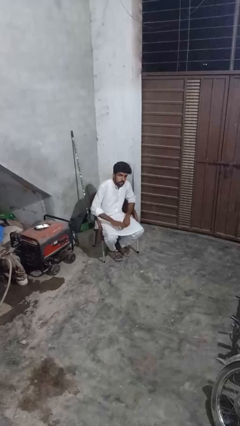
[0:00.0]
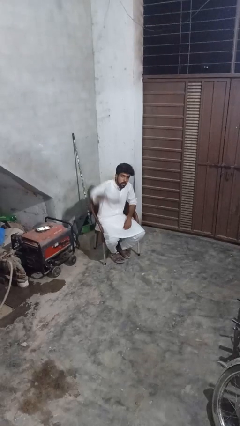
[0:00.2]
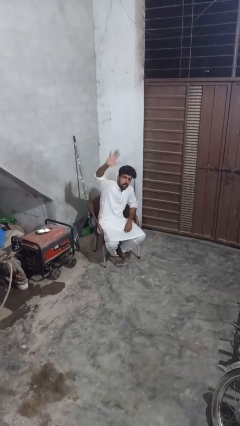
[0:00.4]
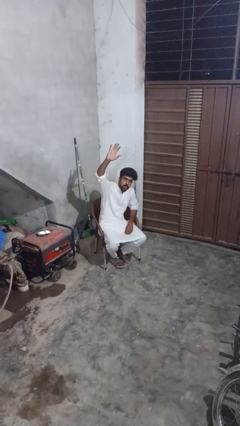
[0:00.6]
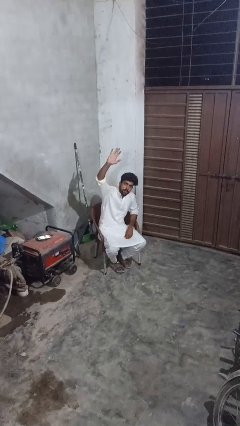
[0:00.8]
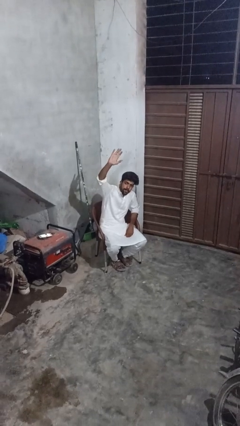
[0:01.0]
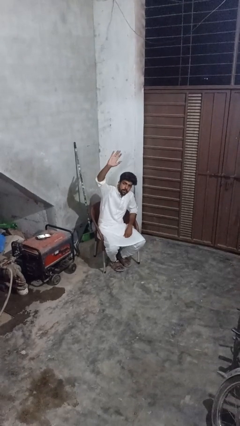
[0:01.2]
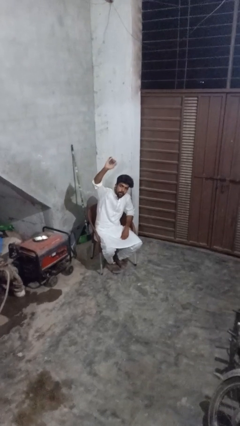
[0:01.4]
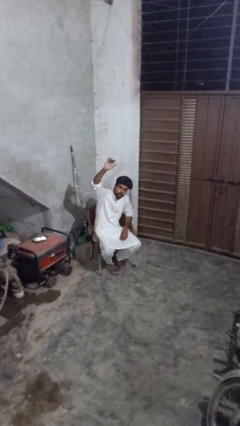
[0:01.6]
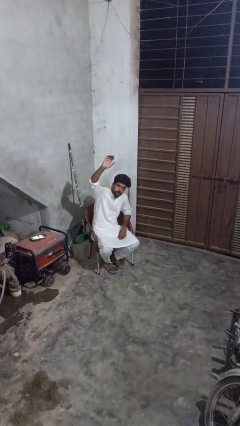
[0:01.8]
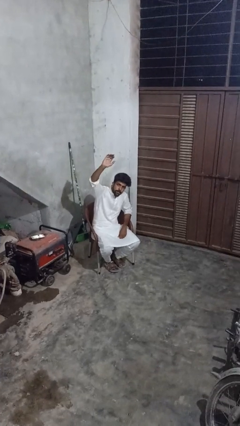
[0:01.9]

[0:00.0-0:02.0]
person gestures raise hand

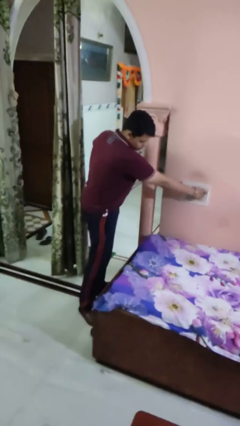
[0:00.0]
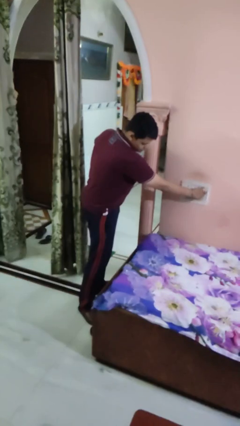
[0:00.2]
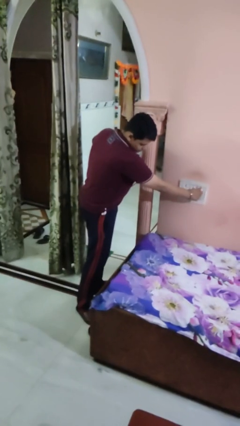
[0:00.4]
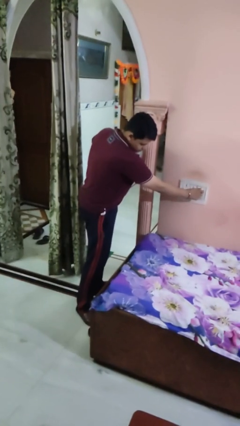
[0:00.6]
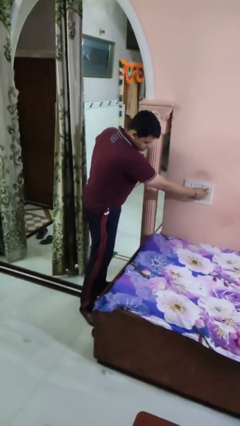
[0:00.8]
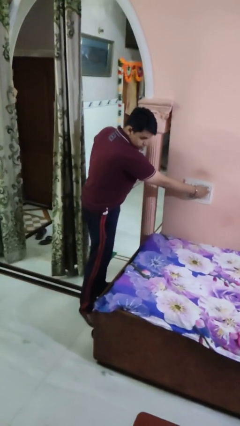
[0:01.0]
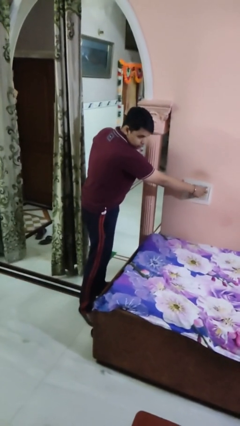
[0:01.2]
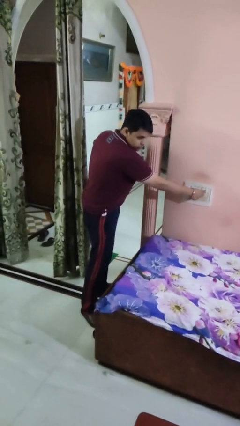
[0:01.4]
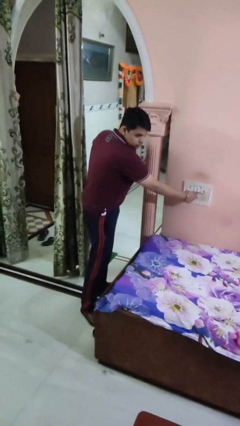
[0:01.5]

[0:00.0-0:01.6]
person adjusts thermostat

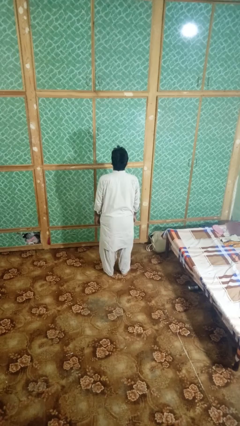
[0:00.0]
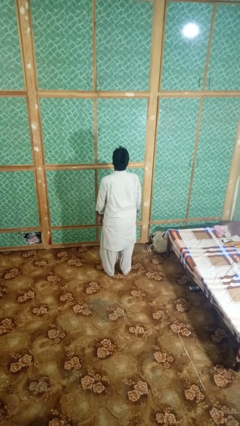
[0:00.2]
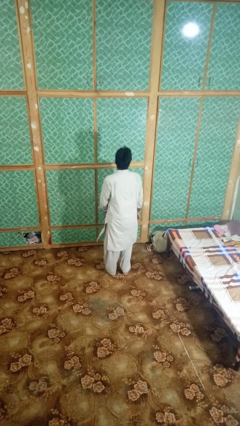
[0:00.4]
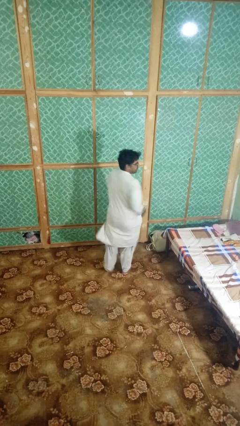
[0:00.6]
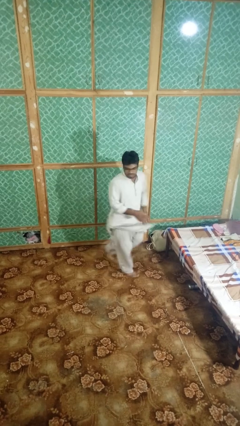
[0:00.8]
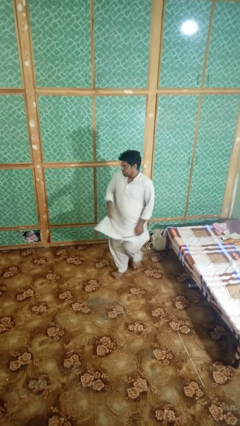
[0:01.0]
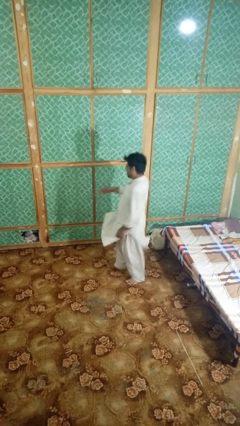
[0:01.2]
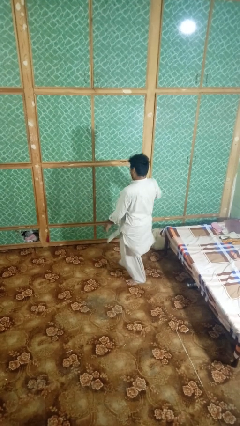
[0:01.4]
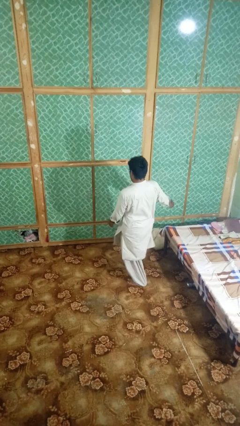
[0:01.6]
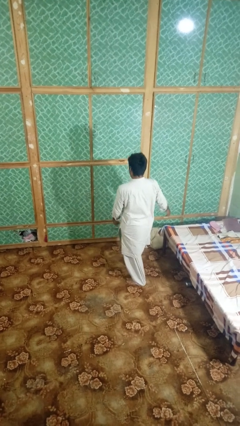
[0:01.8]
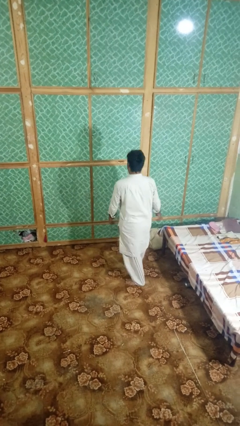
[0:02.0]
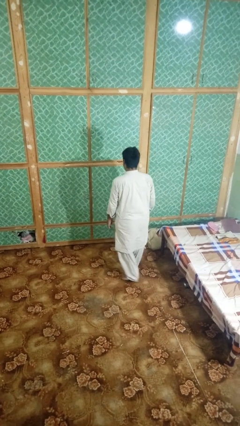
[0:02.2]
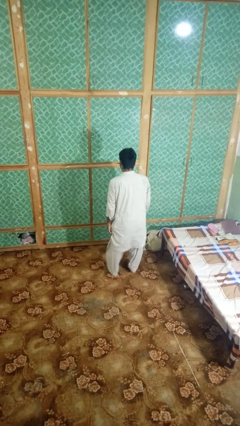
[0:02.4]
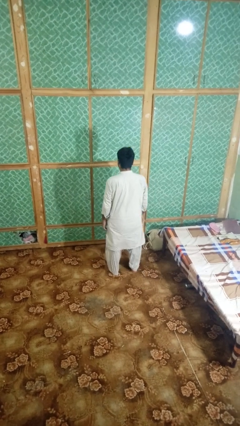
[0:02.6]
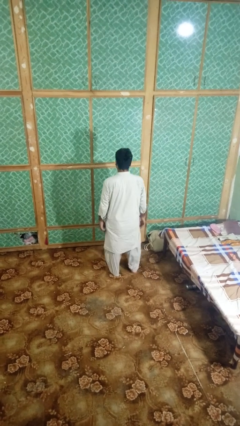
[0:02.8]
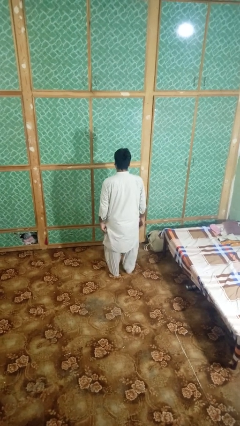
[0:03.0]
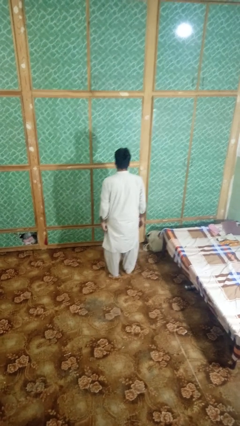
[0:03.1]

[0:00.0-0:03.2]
person twirls

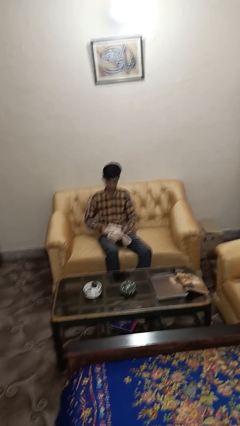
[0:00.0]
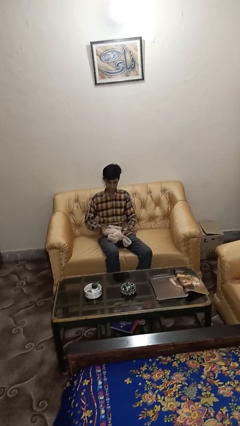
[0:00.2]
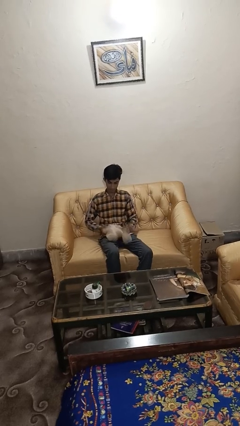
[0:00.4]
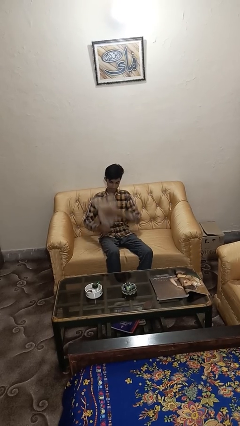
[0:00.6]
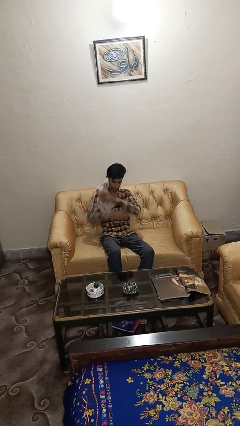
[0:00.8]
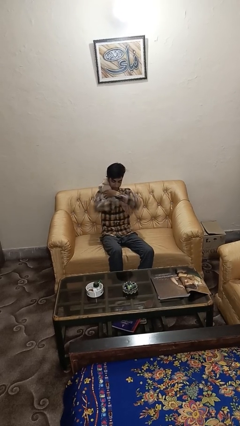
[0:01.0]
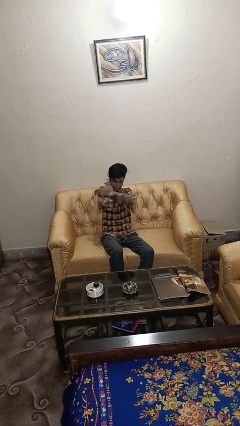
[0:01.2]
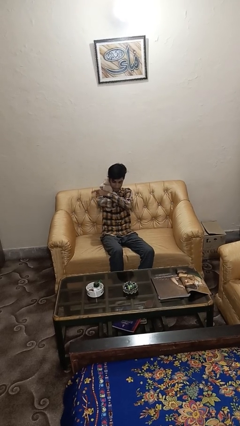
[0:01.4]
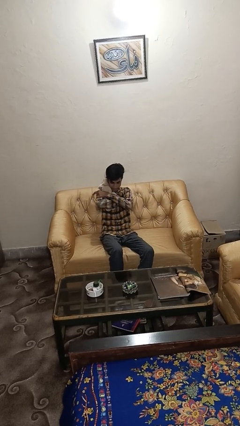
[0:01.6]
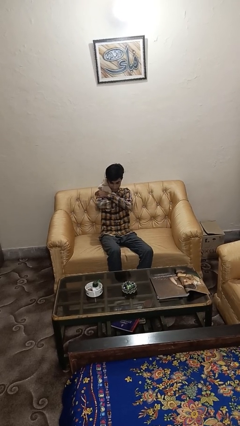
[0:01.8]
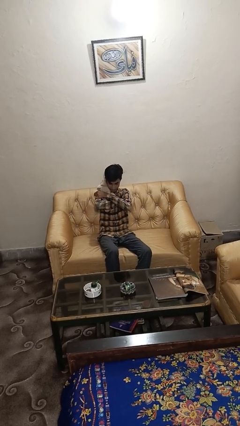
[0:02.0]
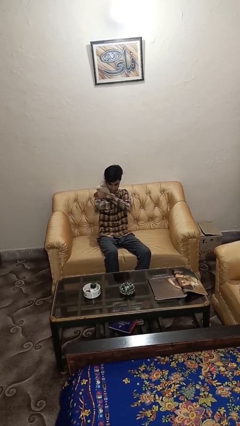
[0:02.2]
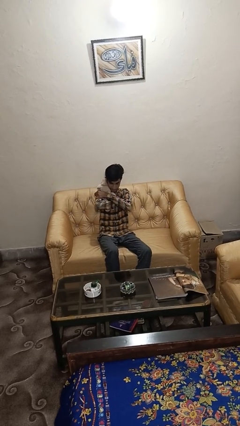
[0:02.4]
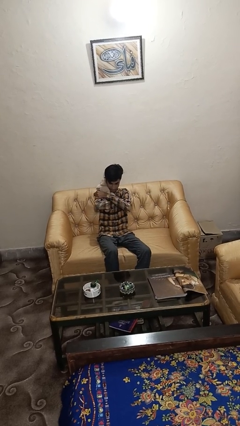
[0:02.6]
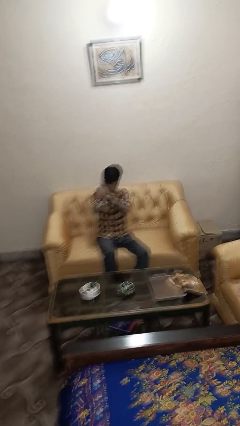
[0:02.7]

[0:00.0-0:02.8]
person hugs stuffed animal

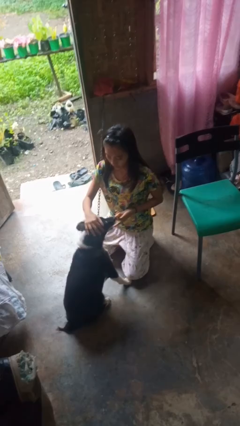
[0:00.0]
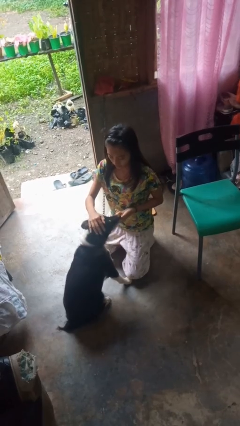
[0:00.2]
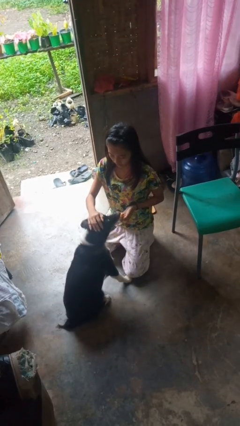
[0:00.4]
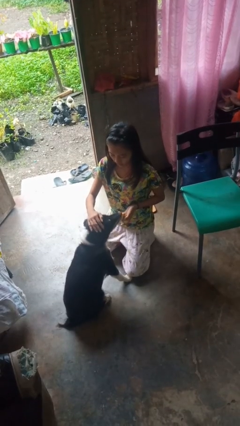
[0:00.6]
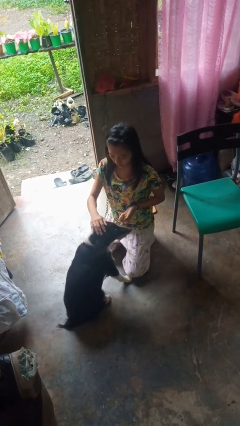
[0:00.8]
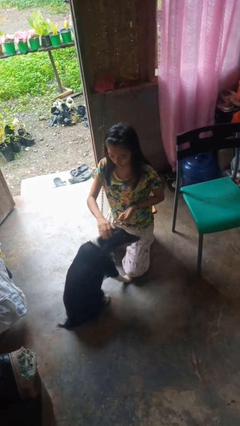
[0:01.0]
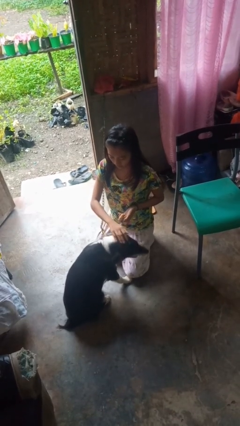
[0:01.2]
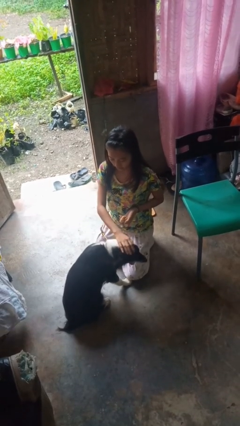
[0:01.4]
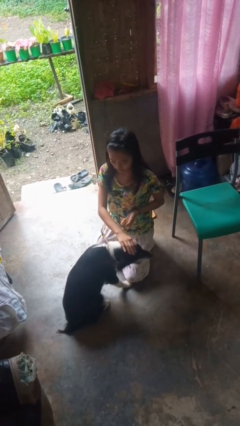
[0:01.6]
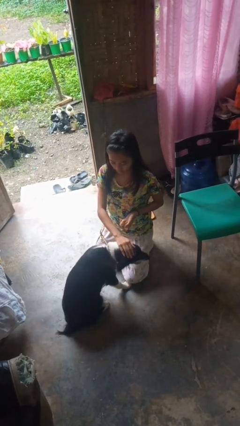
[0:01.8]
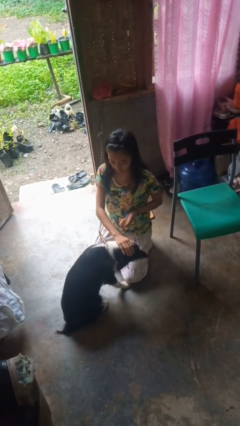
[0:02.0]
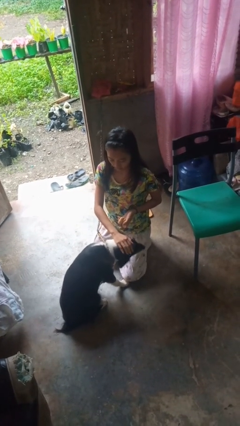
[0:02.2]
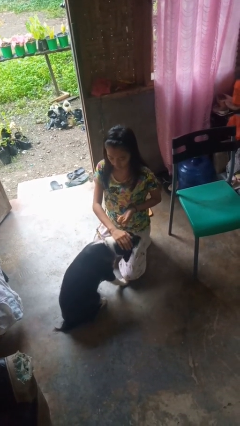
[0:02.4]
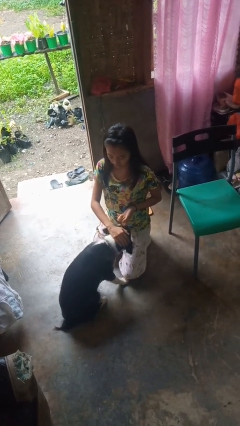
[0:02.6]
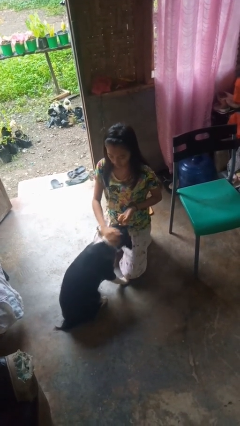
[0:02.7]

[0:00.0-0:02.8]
person pets dog

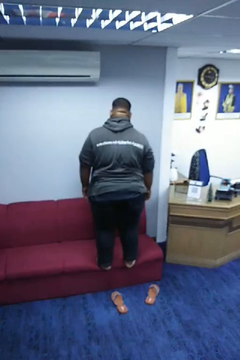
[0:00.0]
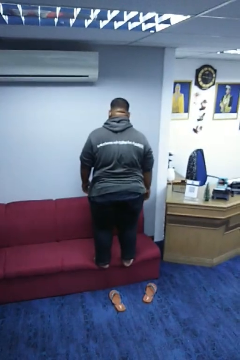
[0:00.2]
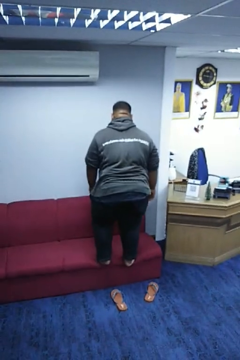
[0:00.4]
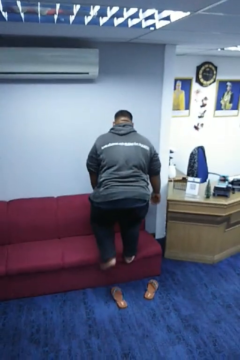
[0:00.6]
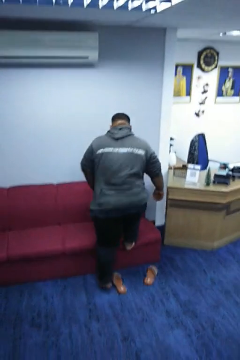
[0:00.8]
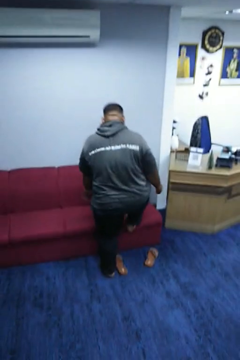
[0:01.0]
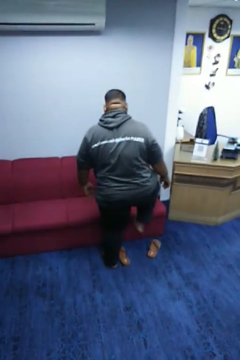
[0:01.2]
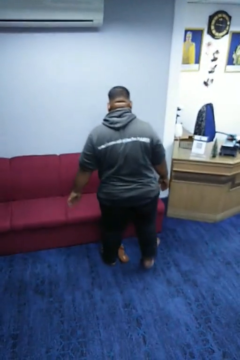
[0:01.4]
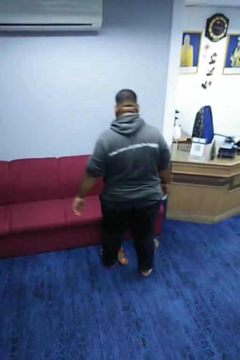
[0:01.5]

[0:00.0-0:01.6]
person climbs off couch

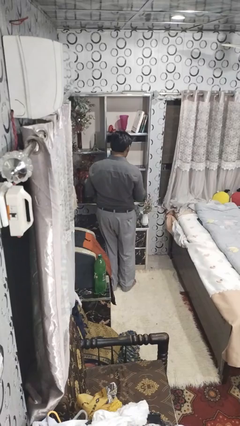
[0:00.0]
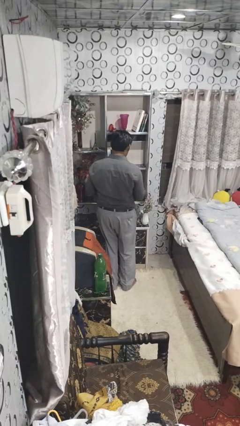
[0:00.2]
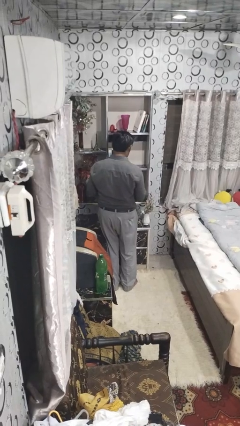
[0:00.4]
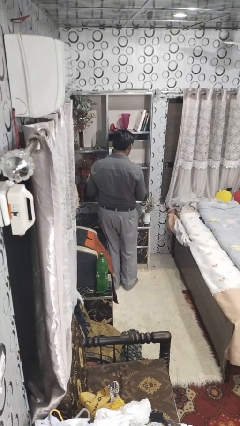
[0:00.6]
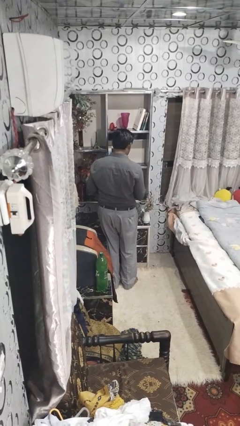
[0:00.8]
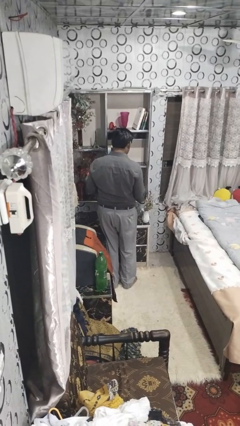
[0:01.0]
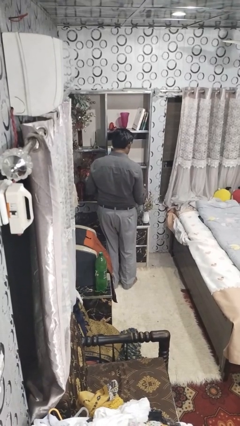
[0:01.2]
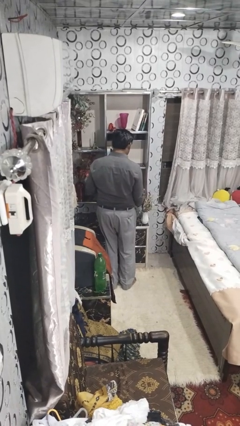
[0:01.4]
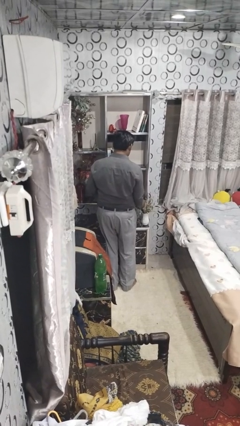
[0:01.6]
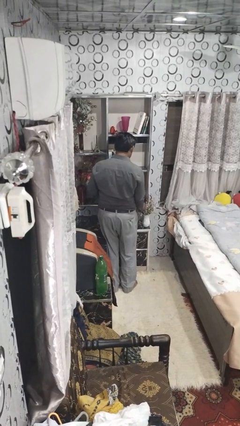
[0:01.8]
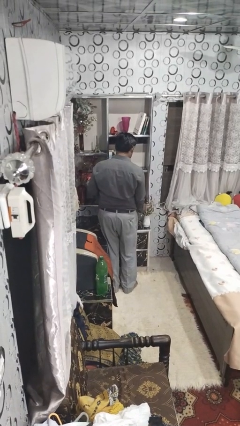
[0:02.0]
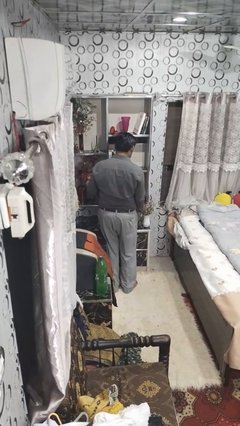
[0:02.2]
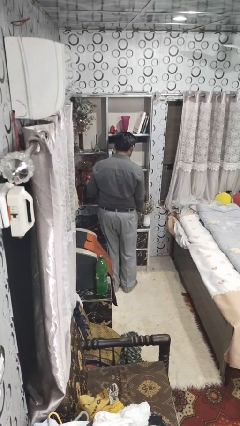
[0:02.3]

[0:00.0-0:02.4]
person arranges flowers in vase

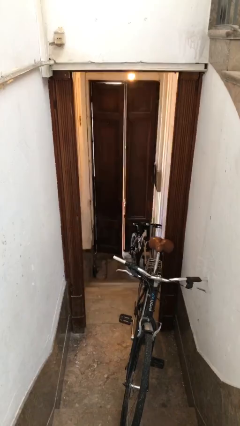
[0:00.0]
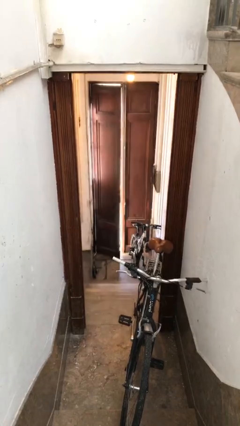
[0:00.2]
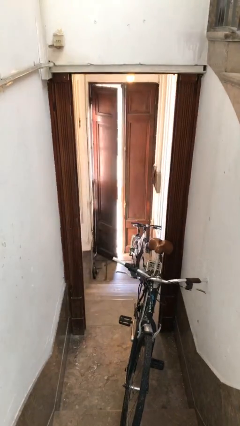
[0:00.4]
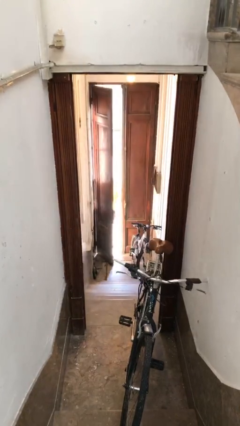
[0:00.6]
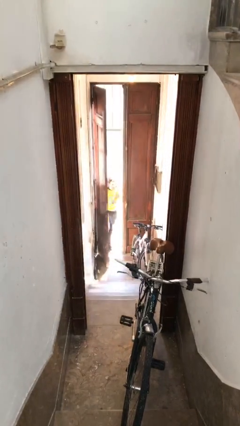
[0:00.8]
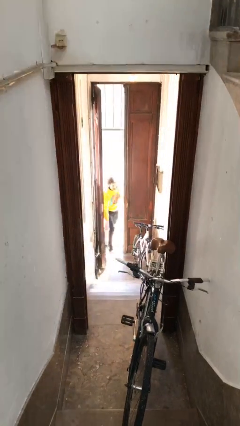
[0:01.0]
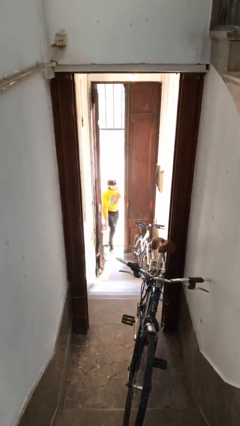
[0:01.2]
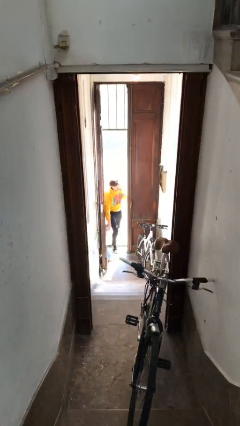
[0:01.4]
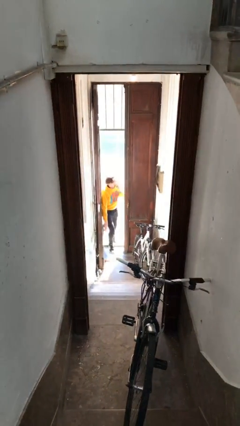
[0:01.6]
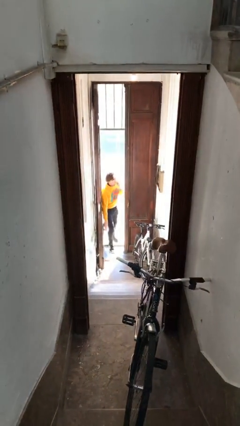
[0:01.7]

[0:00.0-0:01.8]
person opens facility door
